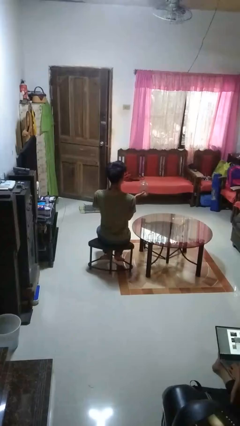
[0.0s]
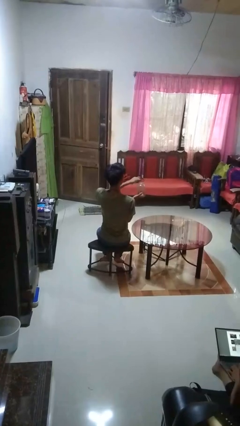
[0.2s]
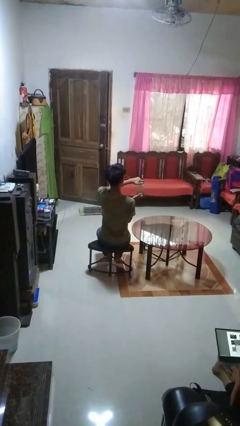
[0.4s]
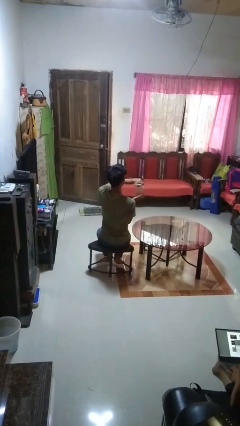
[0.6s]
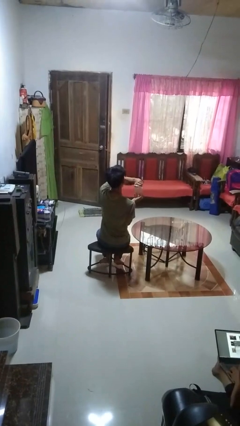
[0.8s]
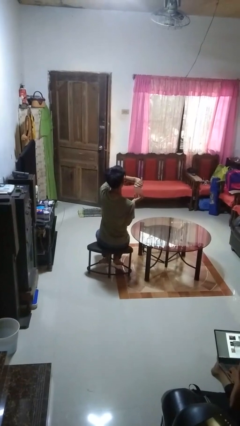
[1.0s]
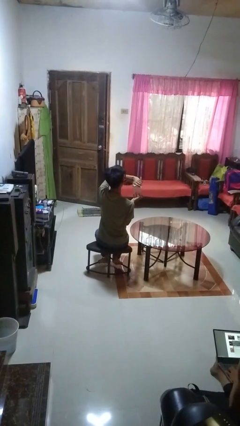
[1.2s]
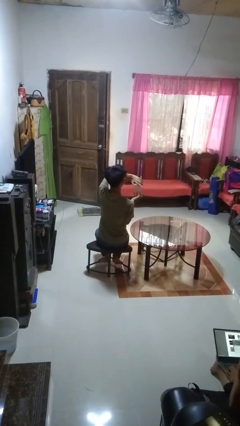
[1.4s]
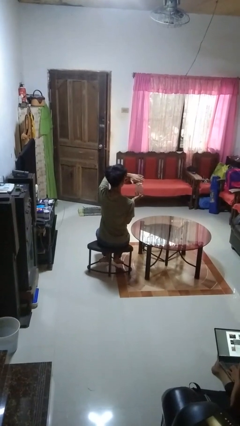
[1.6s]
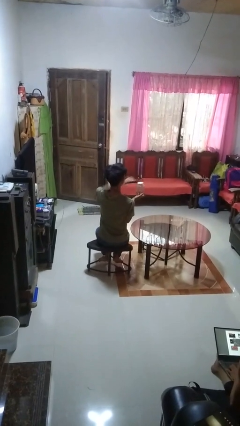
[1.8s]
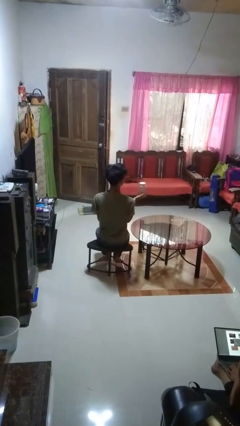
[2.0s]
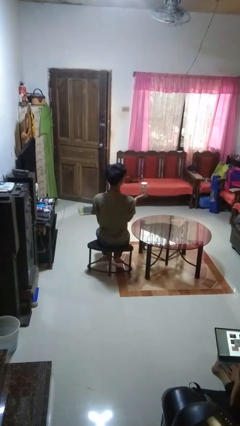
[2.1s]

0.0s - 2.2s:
person closes jar

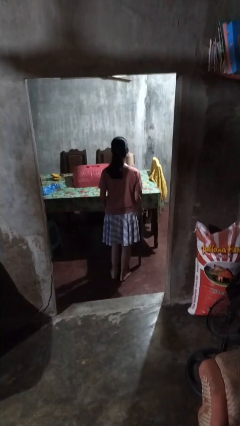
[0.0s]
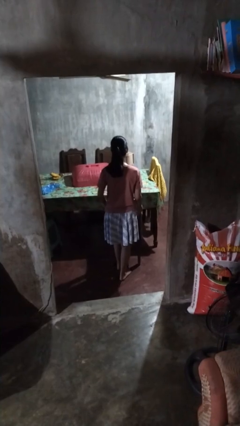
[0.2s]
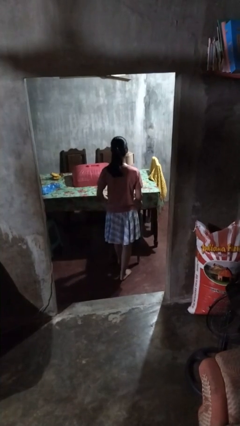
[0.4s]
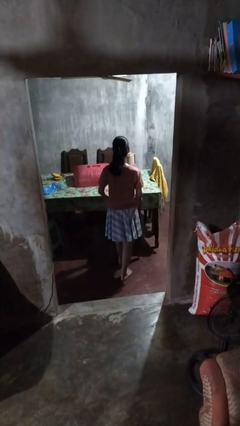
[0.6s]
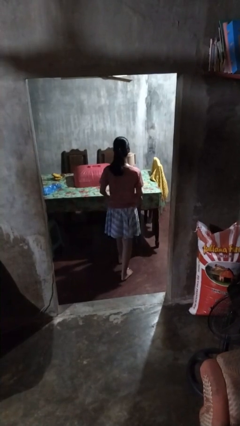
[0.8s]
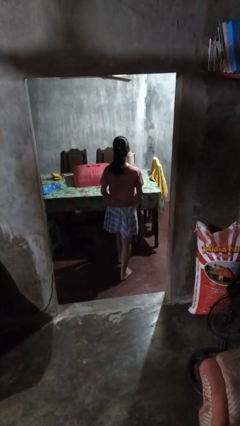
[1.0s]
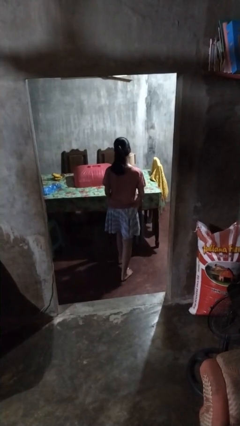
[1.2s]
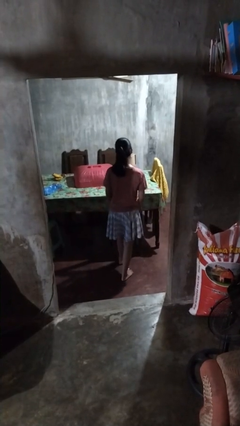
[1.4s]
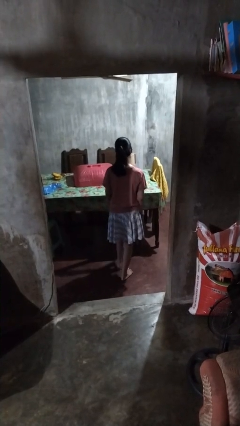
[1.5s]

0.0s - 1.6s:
person pushes in chair

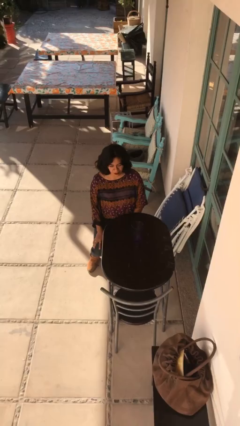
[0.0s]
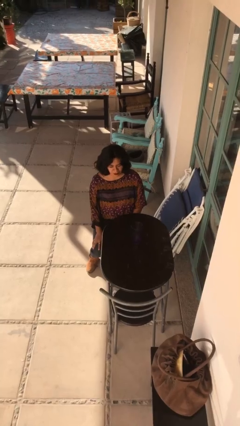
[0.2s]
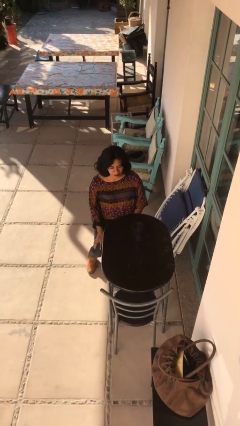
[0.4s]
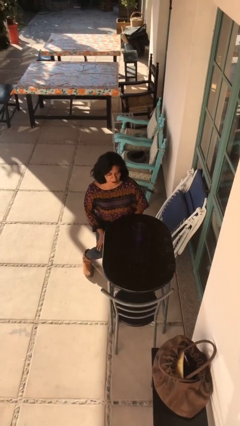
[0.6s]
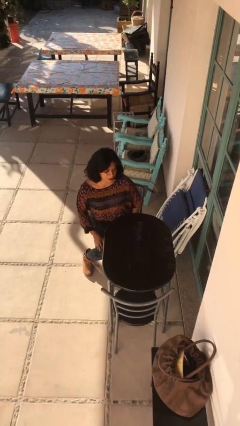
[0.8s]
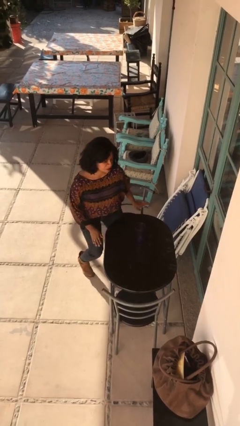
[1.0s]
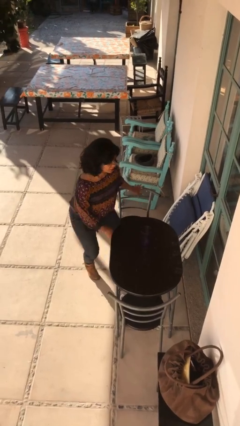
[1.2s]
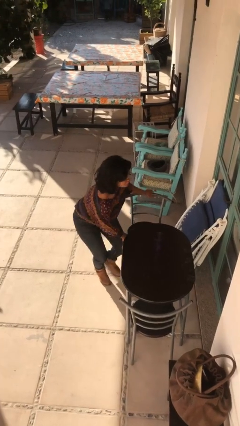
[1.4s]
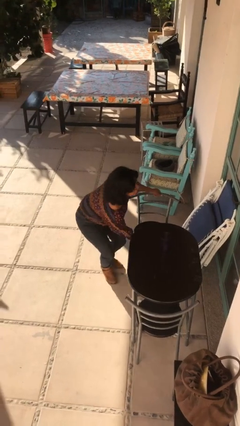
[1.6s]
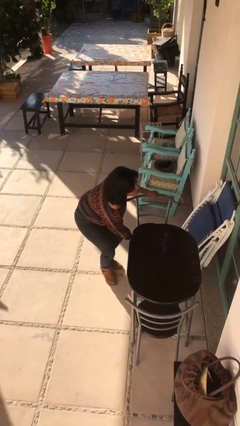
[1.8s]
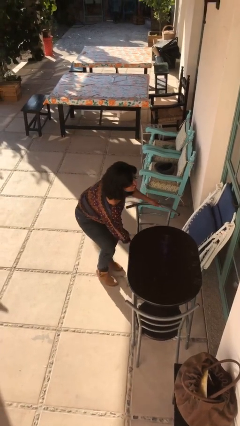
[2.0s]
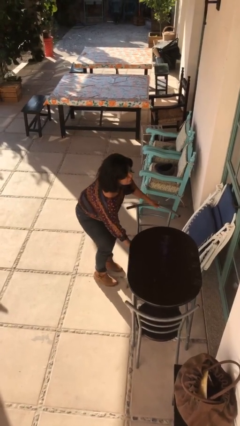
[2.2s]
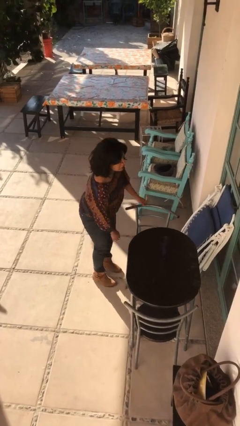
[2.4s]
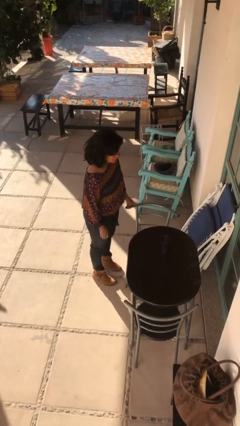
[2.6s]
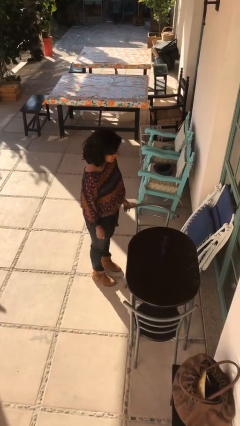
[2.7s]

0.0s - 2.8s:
person stands up

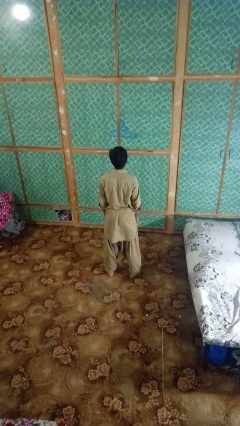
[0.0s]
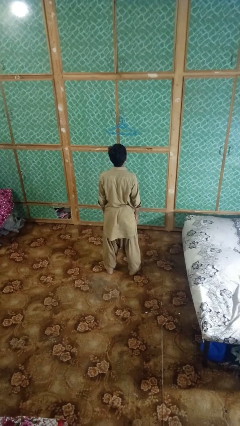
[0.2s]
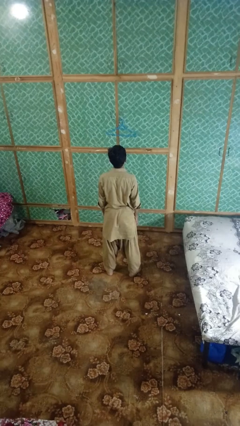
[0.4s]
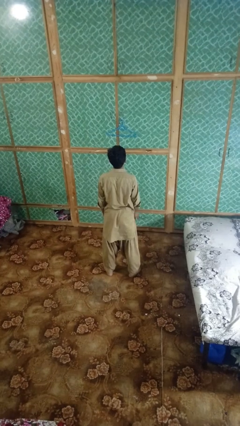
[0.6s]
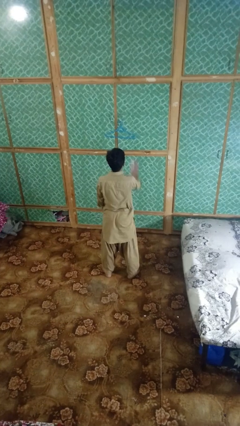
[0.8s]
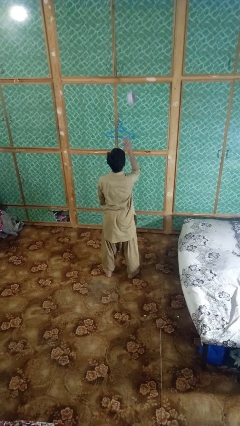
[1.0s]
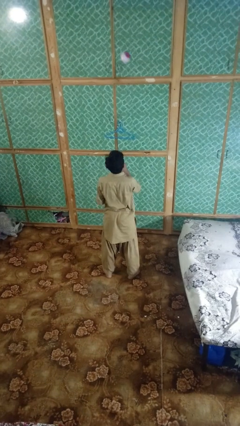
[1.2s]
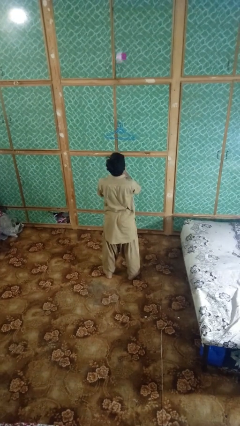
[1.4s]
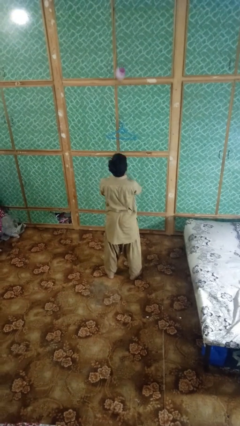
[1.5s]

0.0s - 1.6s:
person drops object

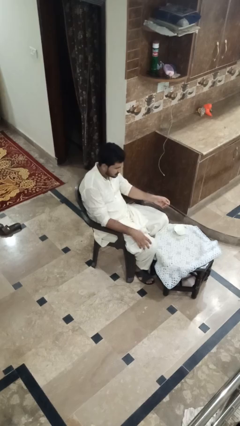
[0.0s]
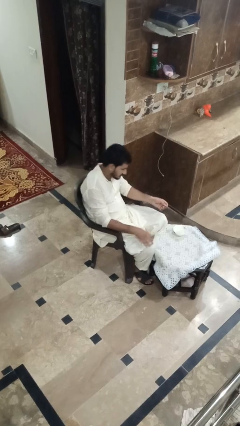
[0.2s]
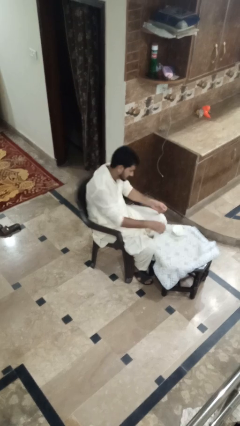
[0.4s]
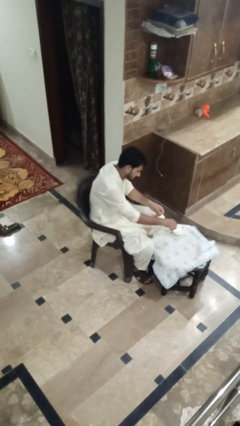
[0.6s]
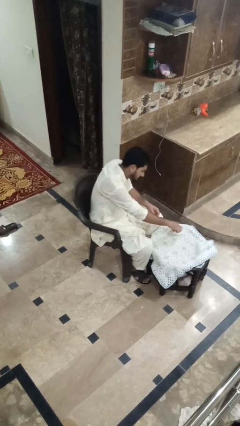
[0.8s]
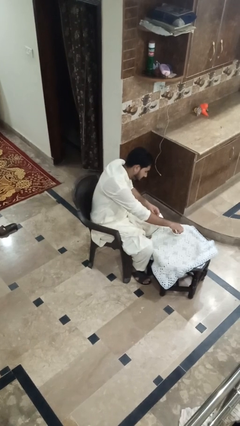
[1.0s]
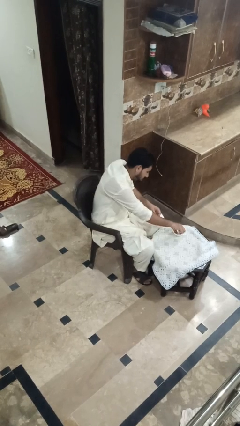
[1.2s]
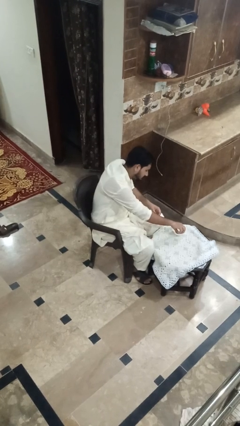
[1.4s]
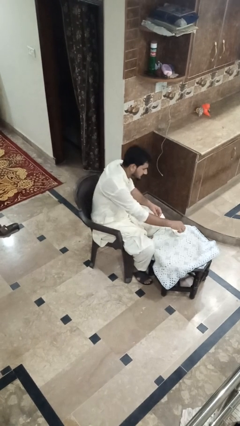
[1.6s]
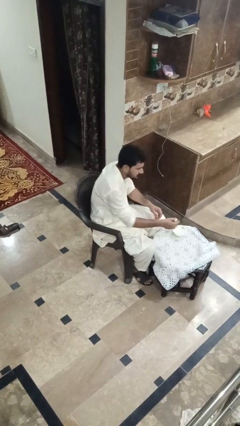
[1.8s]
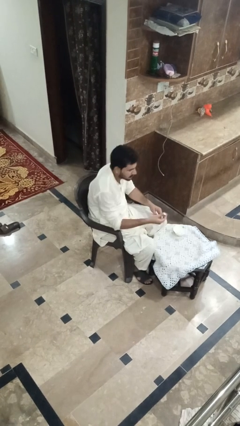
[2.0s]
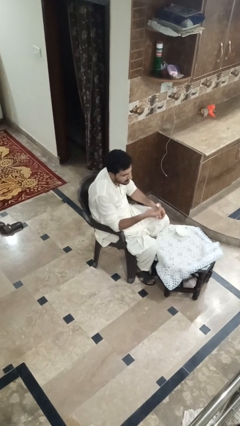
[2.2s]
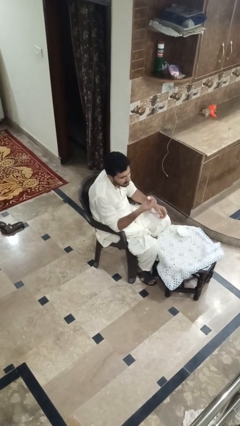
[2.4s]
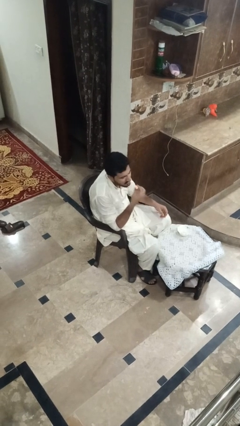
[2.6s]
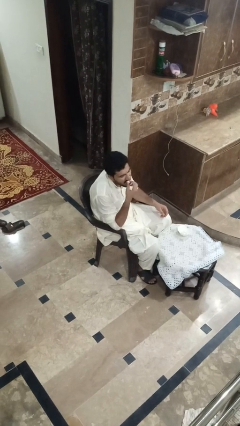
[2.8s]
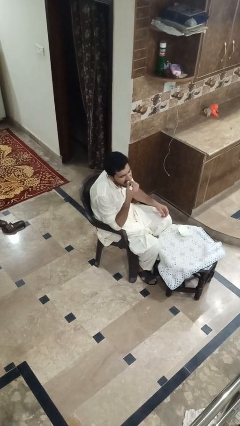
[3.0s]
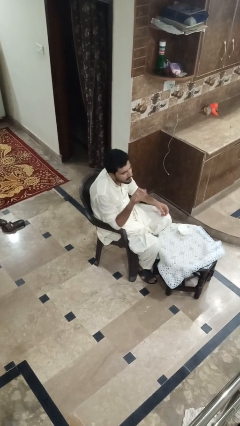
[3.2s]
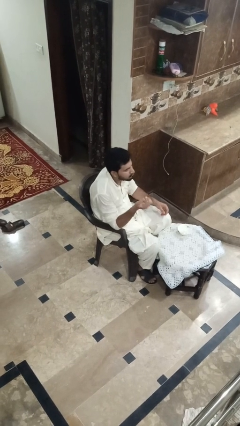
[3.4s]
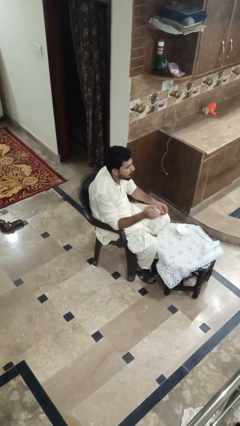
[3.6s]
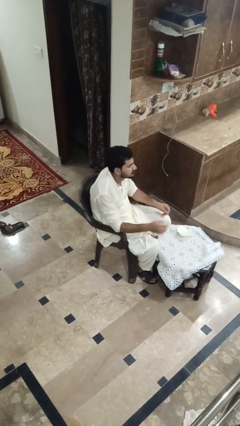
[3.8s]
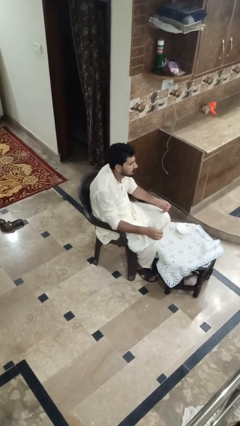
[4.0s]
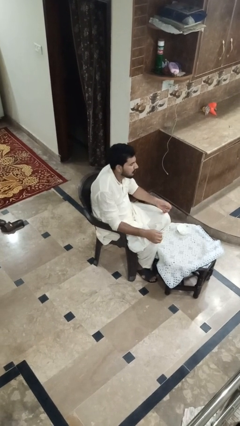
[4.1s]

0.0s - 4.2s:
person eats with hands

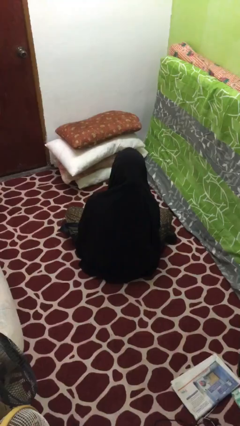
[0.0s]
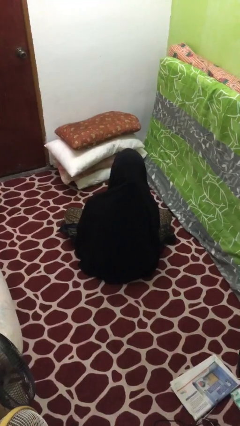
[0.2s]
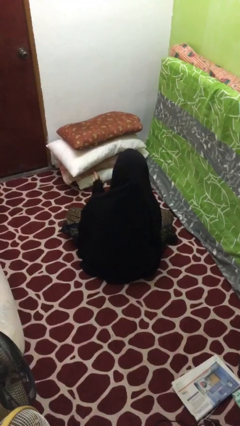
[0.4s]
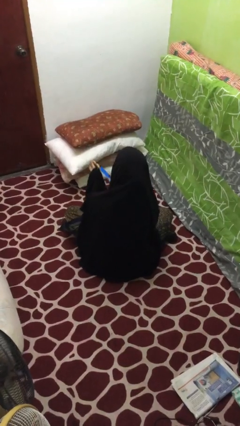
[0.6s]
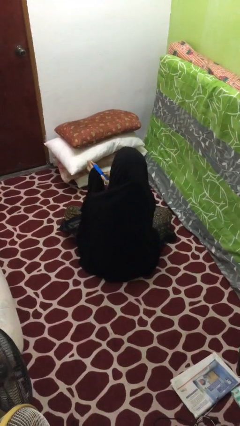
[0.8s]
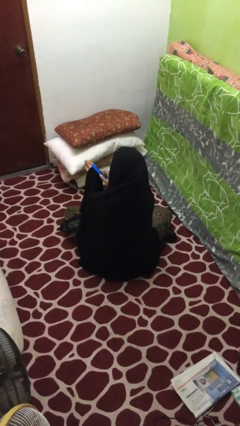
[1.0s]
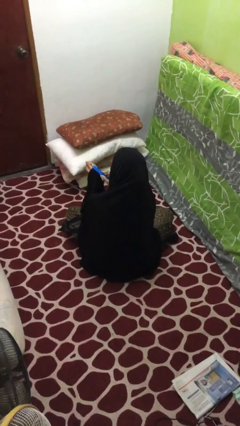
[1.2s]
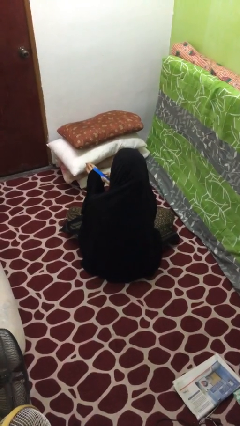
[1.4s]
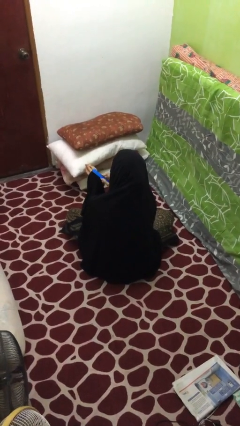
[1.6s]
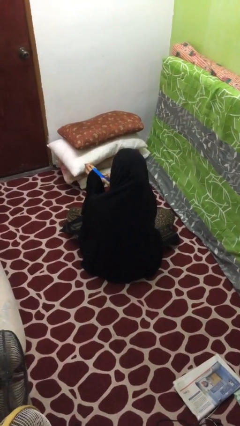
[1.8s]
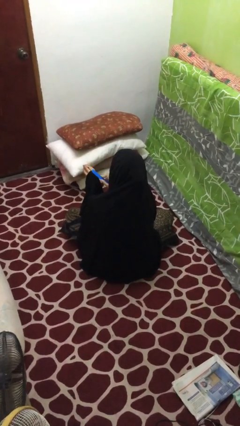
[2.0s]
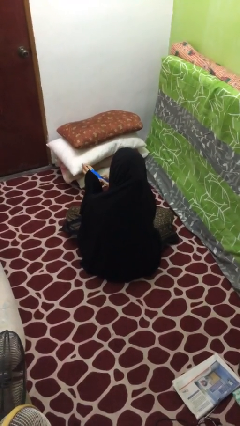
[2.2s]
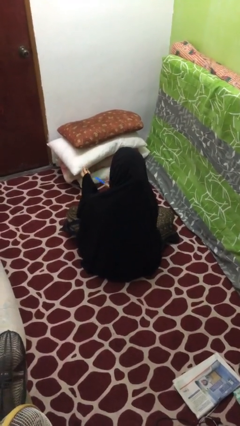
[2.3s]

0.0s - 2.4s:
person files fingernails

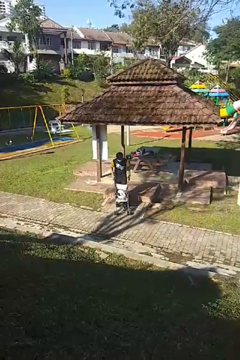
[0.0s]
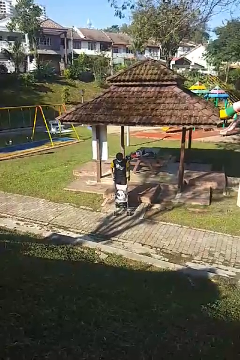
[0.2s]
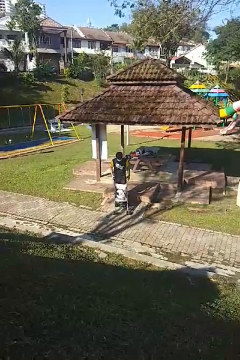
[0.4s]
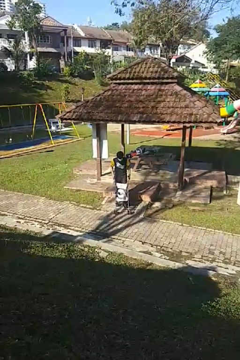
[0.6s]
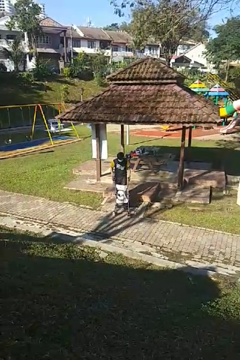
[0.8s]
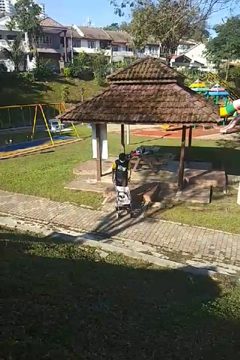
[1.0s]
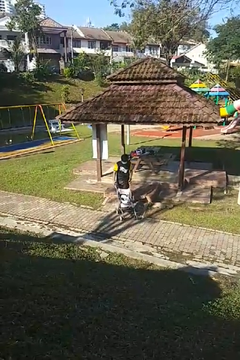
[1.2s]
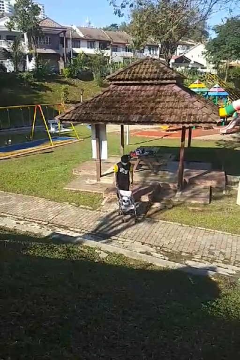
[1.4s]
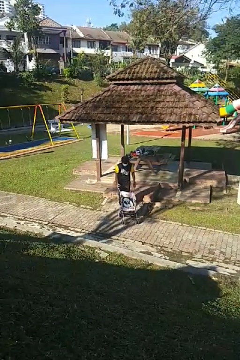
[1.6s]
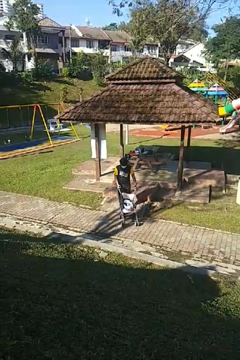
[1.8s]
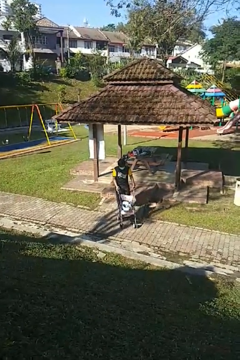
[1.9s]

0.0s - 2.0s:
person pushes wheeled cart

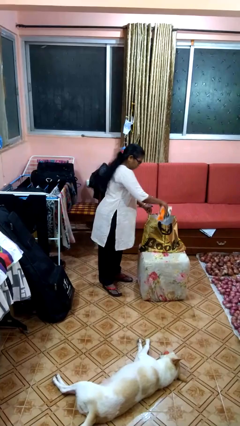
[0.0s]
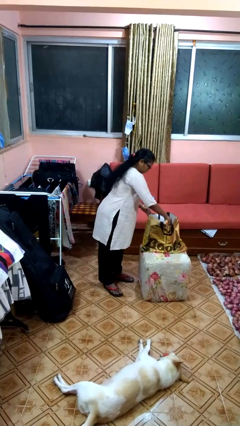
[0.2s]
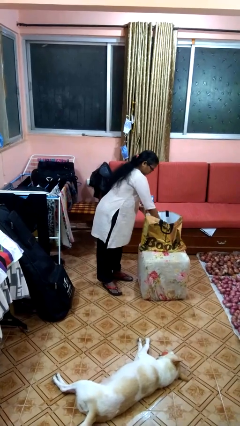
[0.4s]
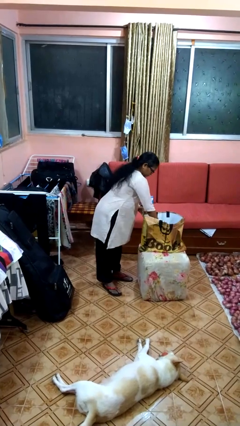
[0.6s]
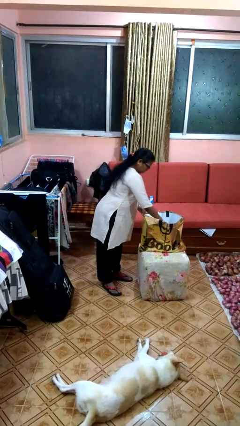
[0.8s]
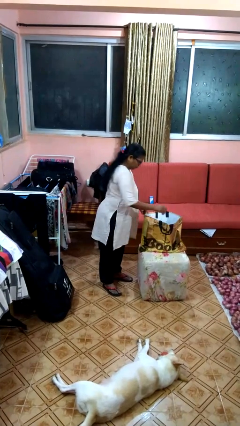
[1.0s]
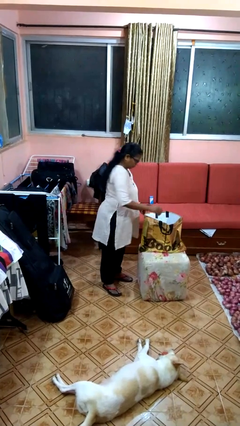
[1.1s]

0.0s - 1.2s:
person puts object into bag
